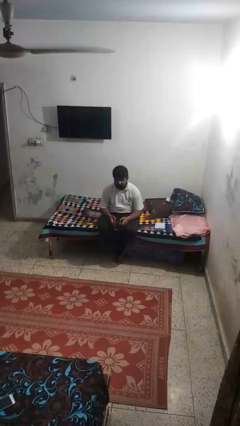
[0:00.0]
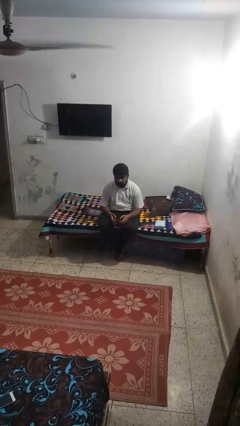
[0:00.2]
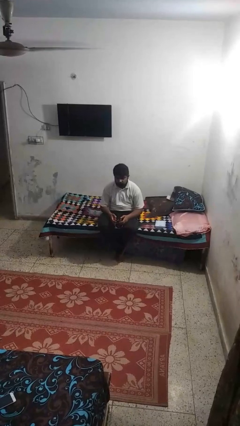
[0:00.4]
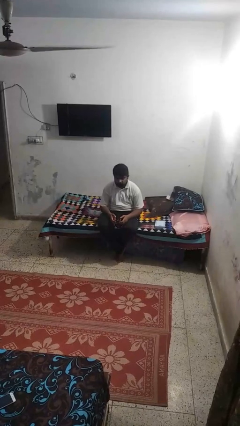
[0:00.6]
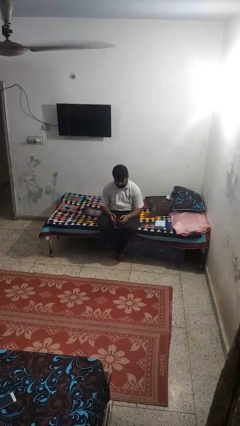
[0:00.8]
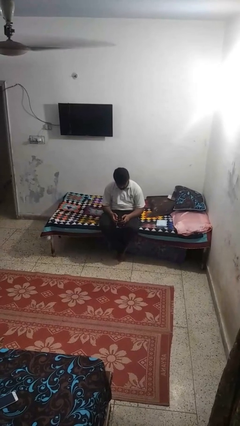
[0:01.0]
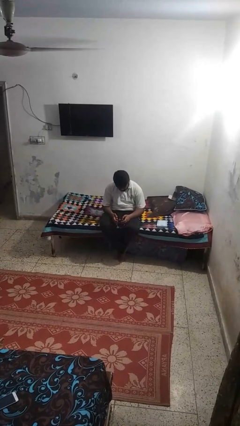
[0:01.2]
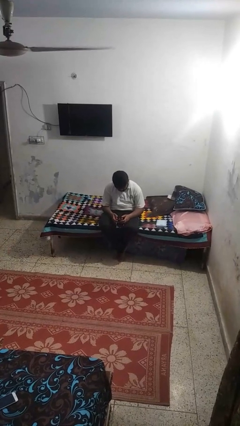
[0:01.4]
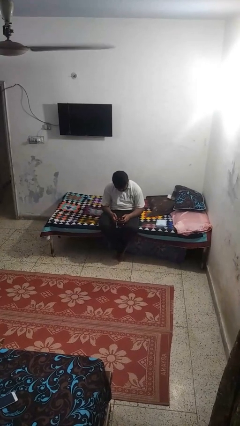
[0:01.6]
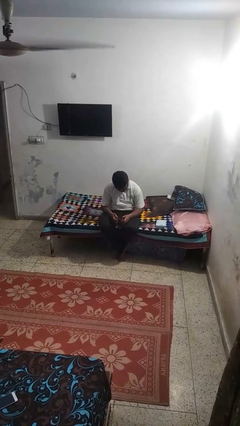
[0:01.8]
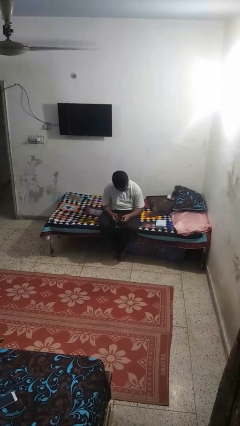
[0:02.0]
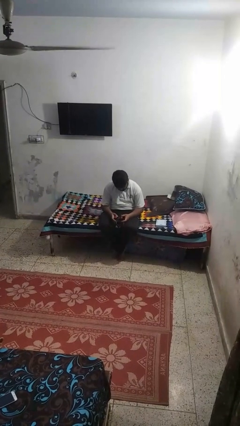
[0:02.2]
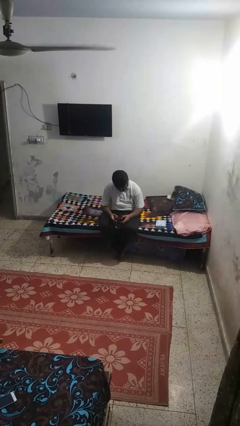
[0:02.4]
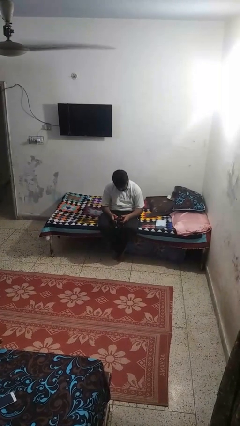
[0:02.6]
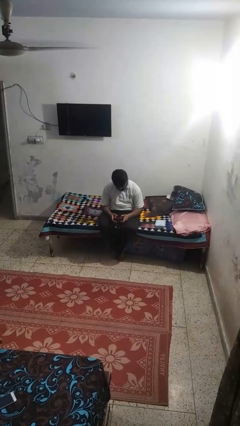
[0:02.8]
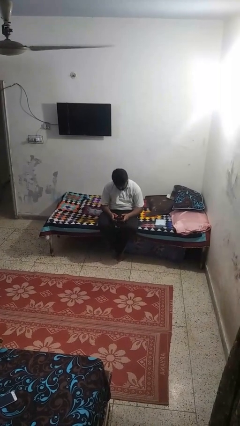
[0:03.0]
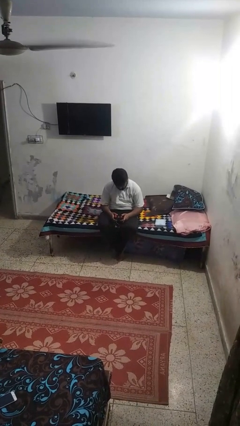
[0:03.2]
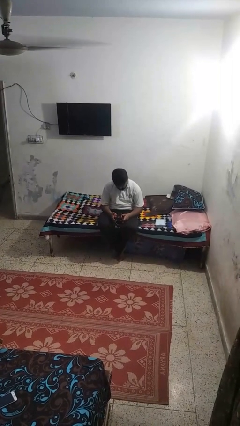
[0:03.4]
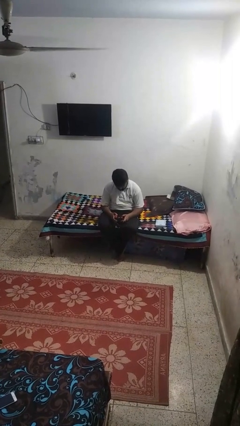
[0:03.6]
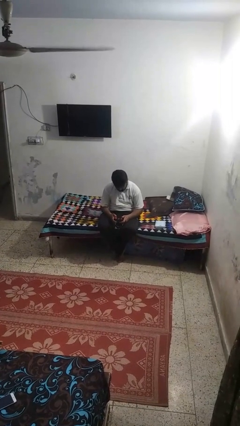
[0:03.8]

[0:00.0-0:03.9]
person interacts with handheld game

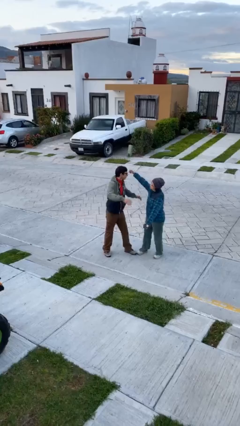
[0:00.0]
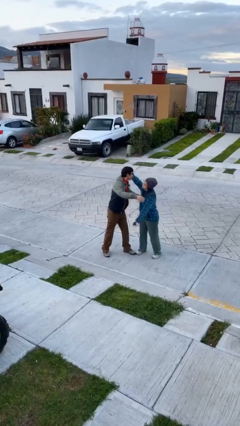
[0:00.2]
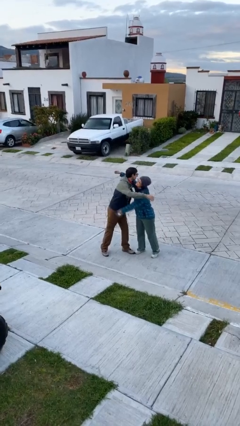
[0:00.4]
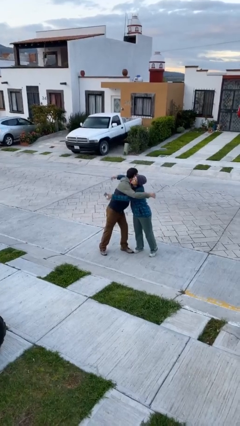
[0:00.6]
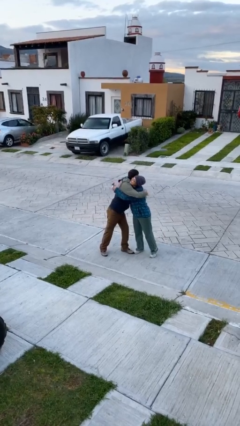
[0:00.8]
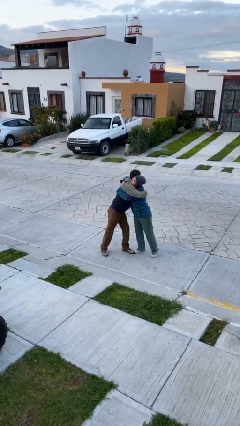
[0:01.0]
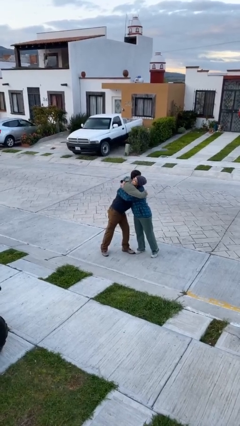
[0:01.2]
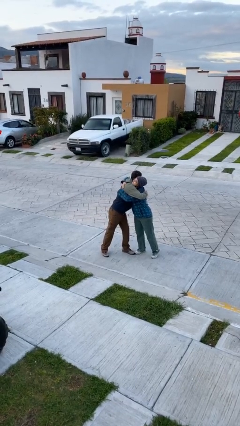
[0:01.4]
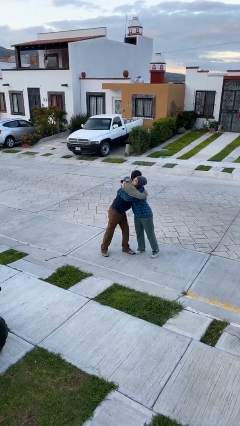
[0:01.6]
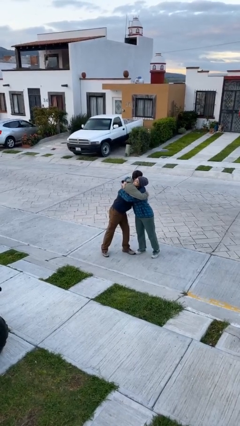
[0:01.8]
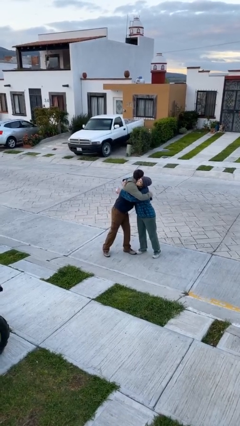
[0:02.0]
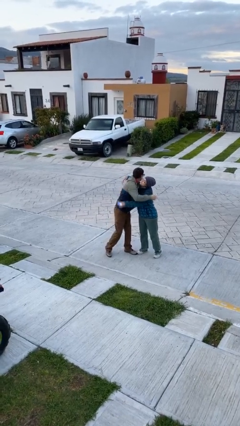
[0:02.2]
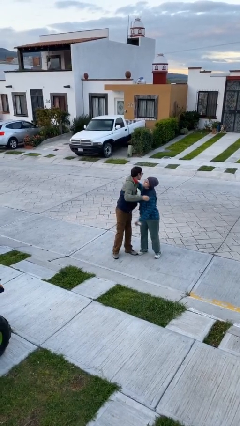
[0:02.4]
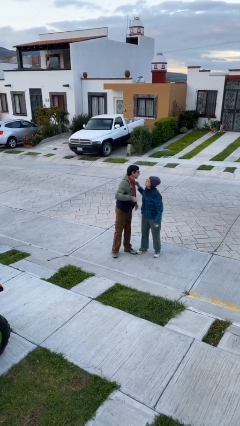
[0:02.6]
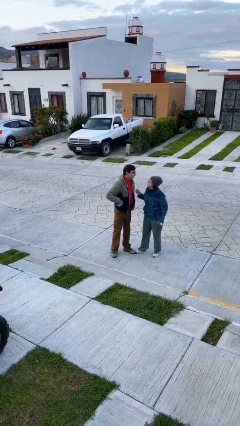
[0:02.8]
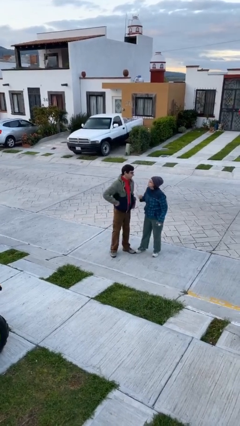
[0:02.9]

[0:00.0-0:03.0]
person embraces person

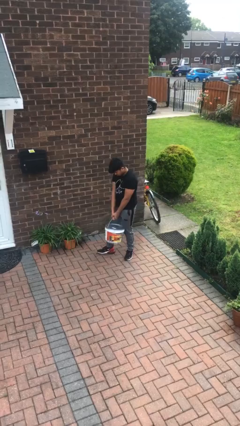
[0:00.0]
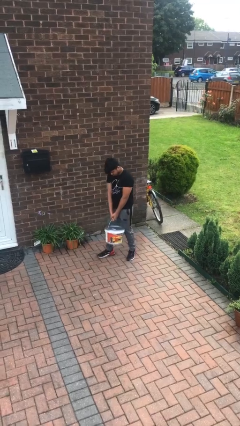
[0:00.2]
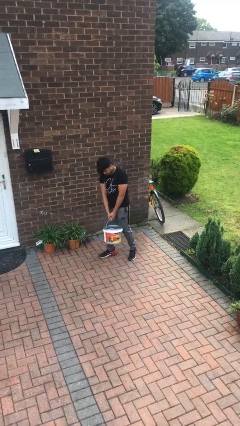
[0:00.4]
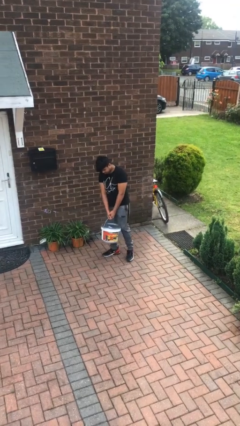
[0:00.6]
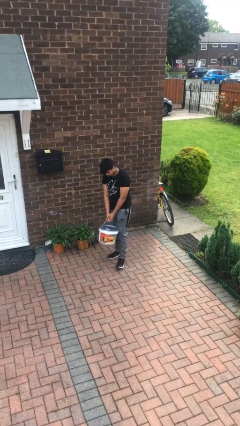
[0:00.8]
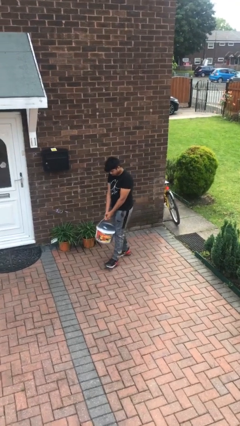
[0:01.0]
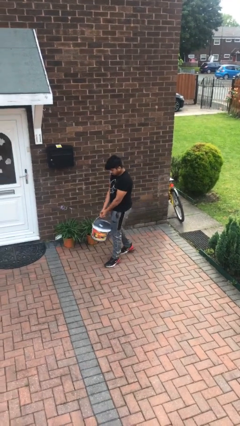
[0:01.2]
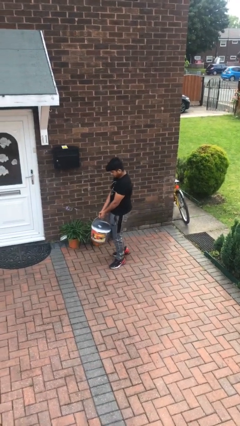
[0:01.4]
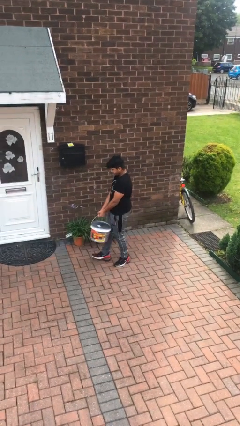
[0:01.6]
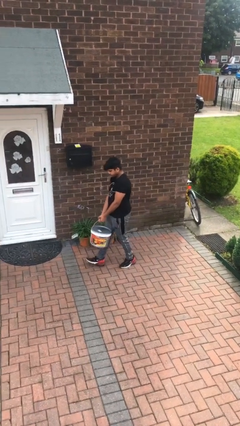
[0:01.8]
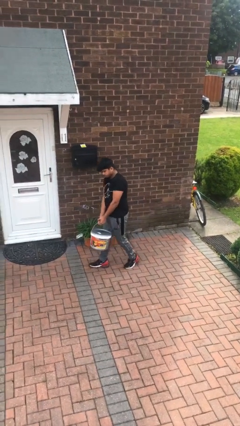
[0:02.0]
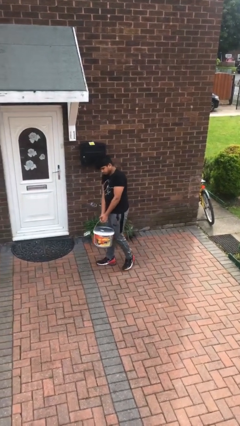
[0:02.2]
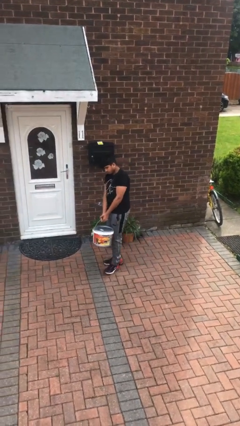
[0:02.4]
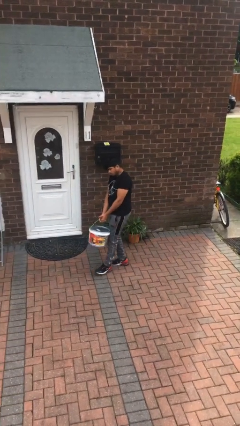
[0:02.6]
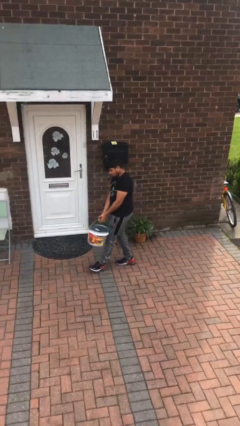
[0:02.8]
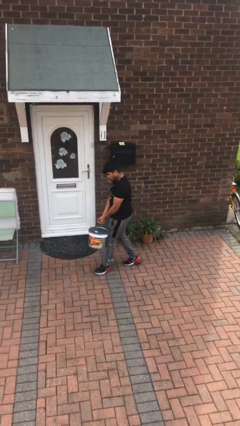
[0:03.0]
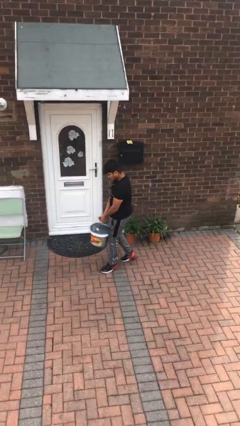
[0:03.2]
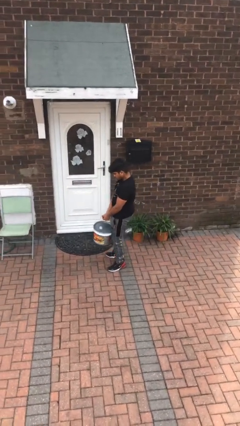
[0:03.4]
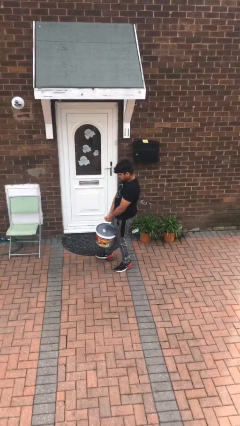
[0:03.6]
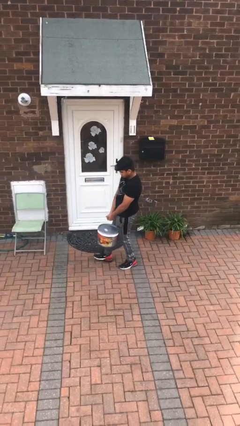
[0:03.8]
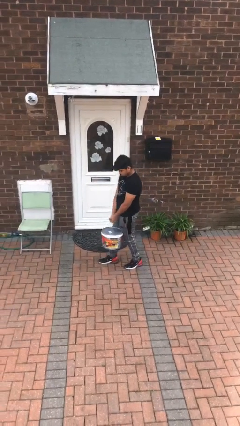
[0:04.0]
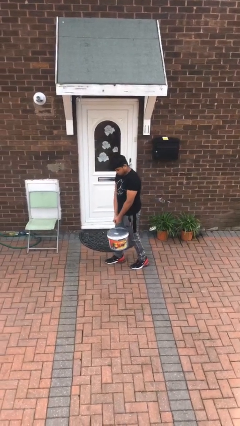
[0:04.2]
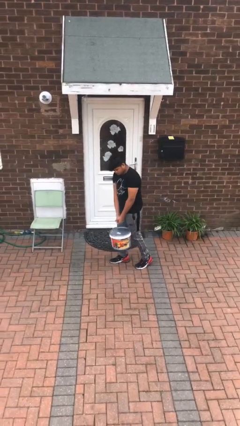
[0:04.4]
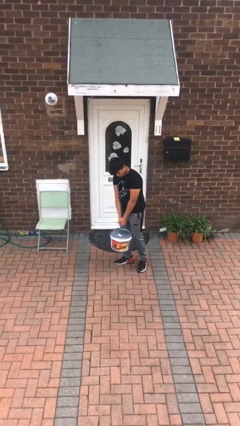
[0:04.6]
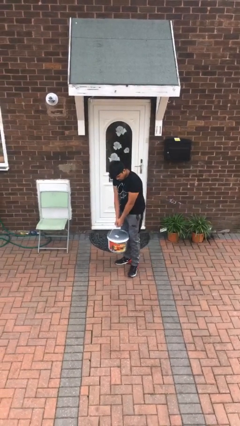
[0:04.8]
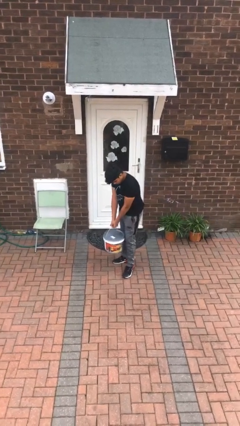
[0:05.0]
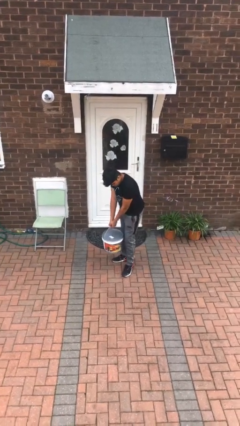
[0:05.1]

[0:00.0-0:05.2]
person carries heavy object

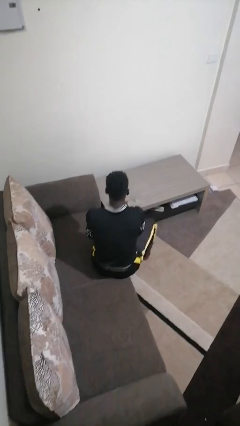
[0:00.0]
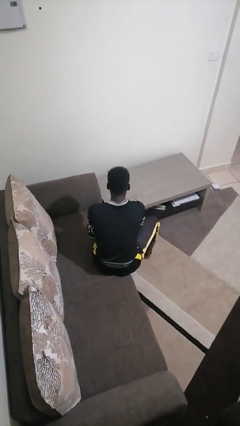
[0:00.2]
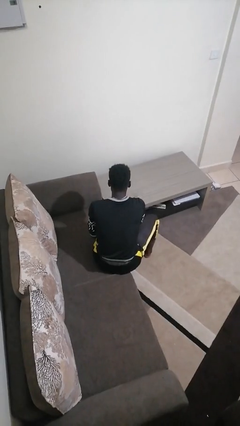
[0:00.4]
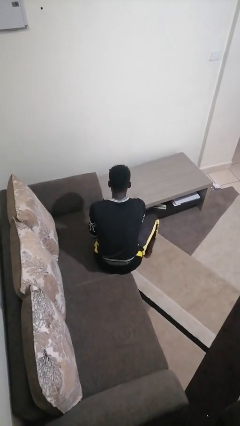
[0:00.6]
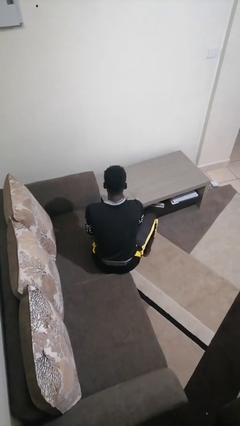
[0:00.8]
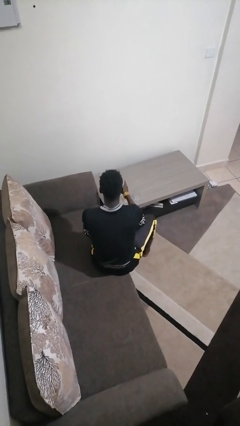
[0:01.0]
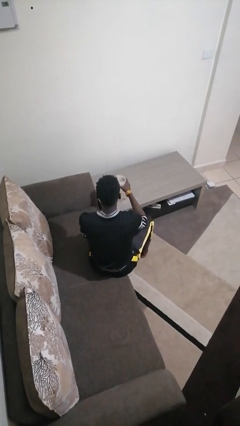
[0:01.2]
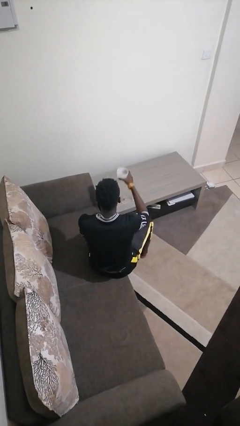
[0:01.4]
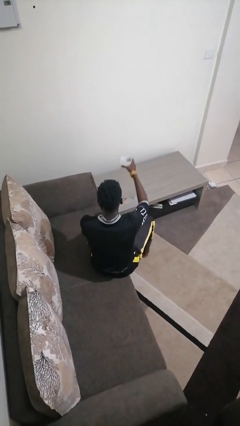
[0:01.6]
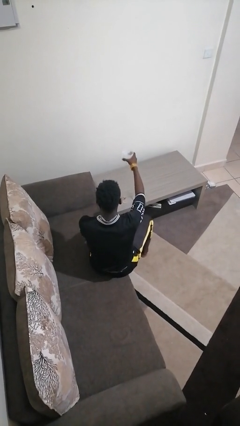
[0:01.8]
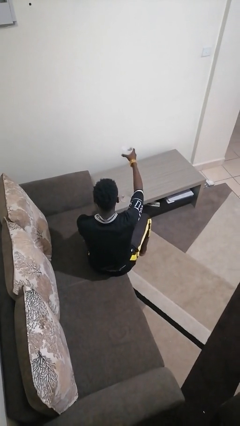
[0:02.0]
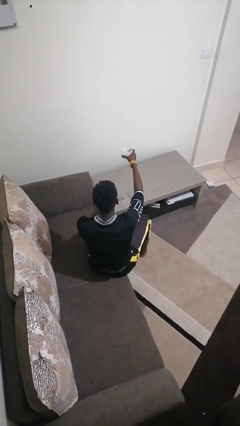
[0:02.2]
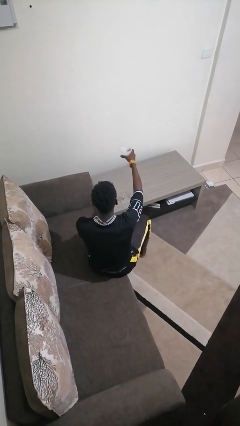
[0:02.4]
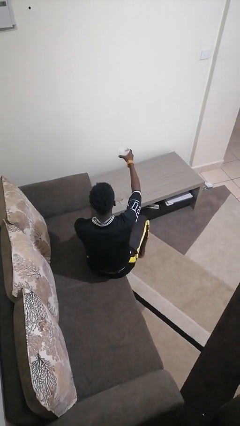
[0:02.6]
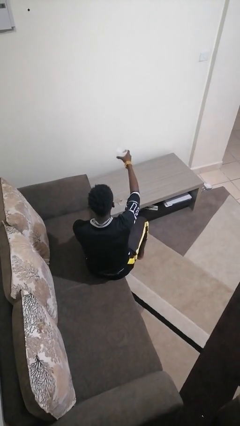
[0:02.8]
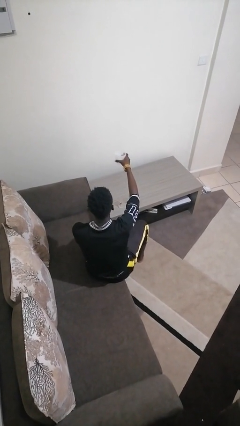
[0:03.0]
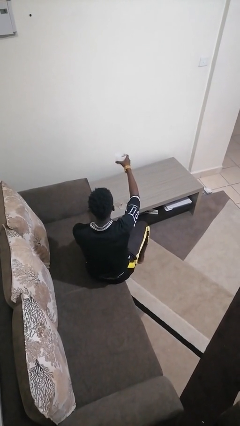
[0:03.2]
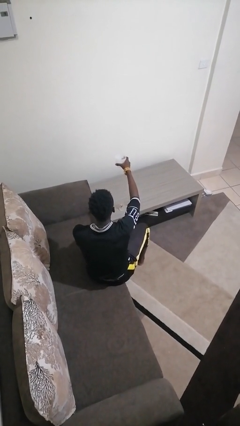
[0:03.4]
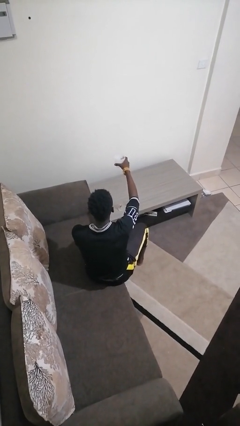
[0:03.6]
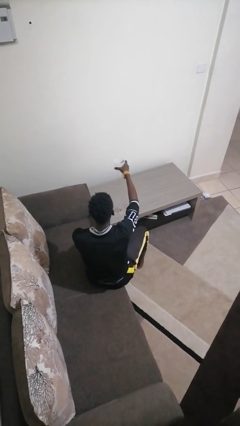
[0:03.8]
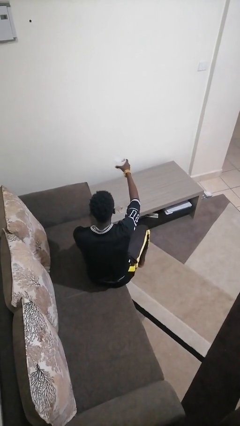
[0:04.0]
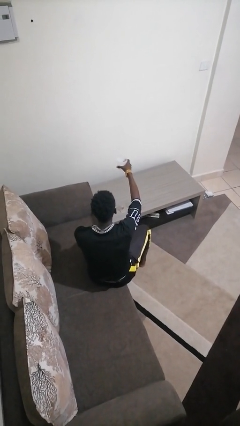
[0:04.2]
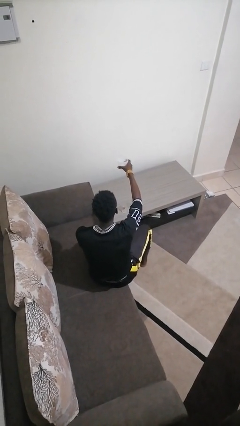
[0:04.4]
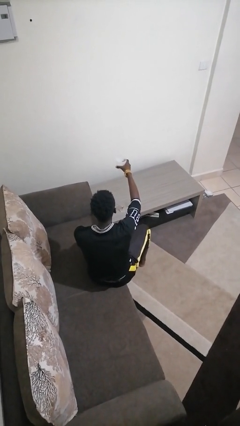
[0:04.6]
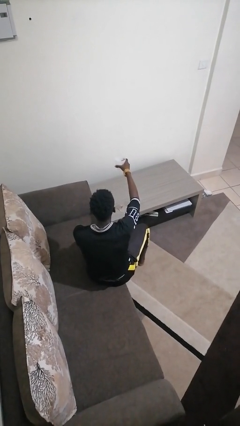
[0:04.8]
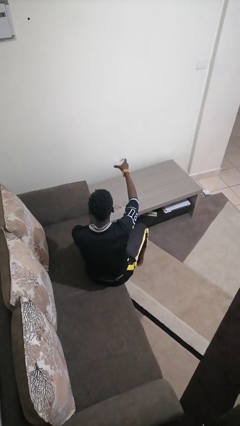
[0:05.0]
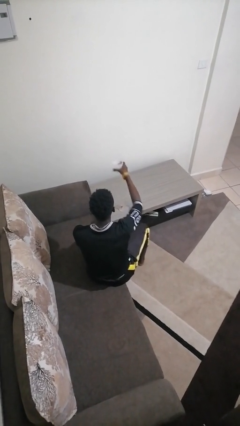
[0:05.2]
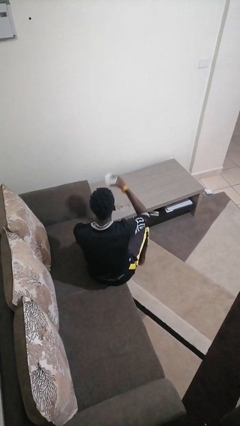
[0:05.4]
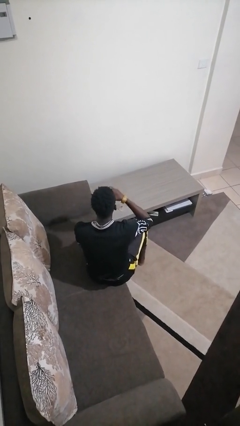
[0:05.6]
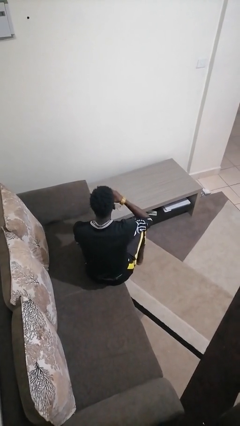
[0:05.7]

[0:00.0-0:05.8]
person picks up object from table
